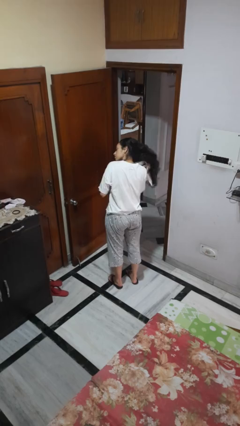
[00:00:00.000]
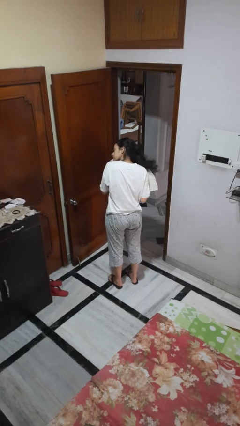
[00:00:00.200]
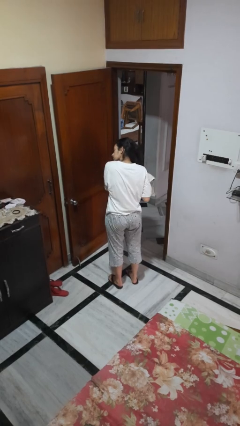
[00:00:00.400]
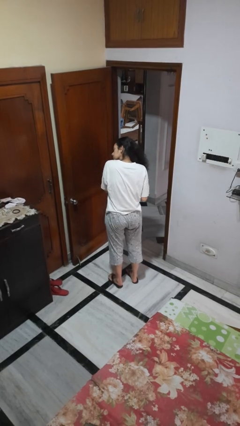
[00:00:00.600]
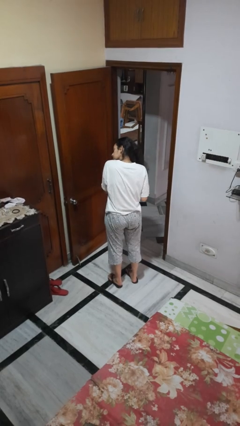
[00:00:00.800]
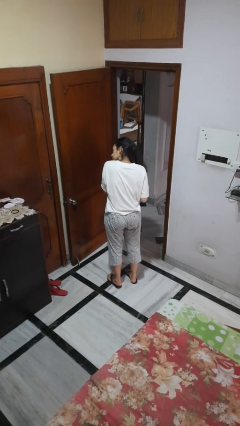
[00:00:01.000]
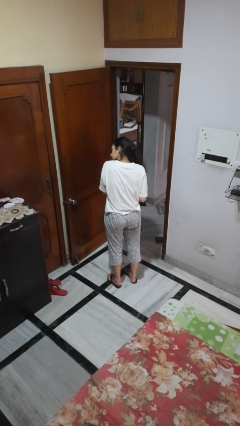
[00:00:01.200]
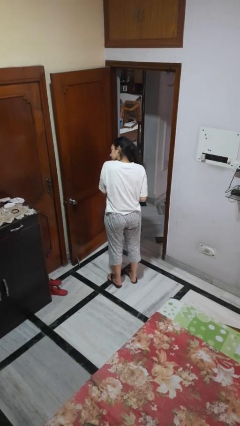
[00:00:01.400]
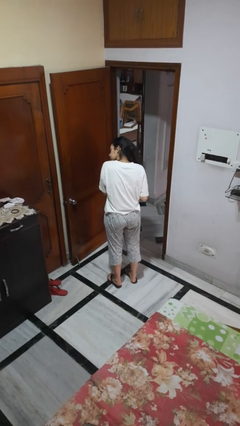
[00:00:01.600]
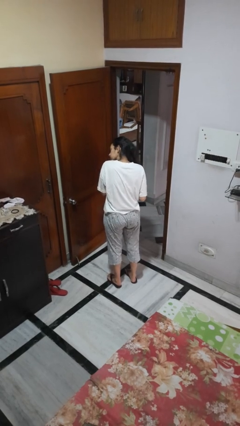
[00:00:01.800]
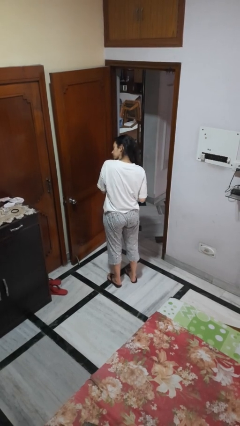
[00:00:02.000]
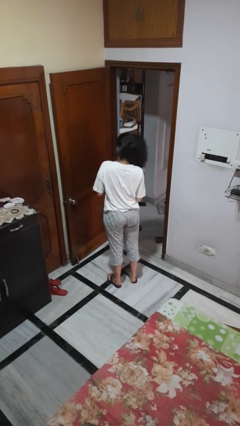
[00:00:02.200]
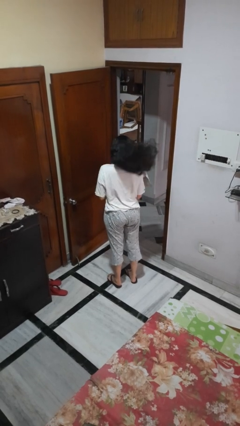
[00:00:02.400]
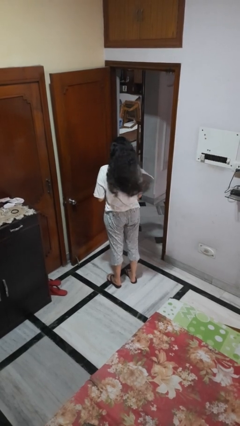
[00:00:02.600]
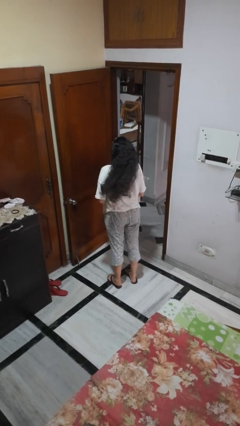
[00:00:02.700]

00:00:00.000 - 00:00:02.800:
person dries hair with towel

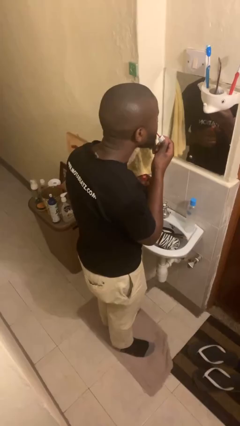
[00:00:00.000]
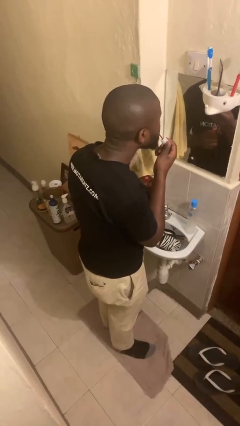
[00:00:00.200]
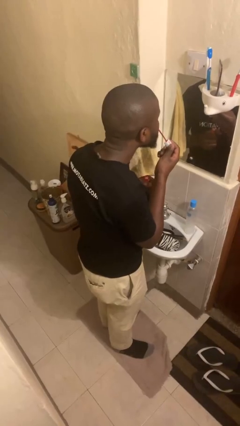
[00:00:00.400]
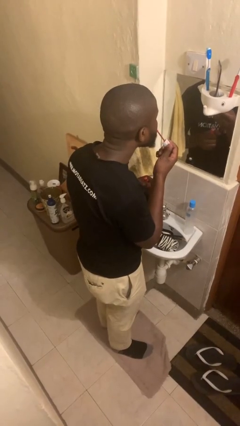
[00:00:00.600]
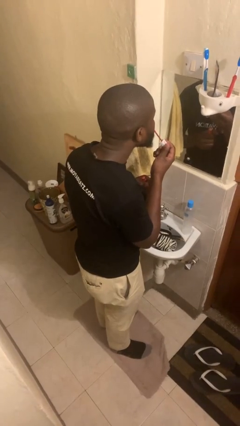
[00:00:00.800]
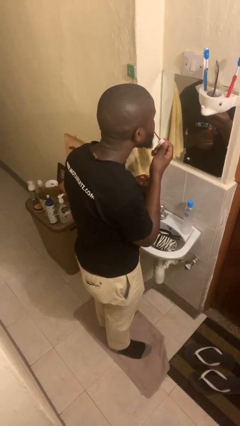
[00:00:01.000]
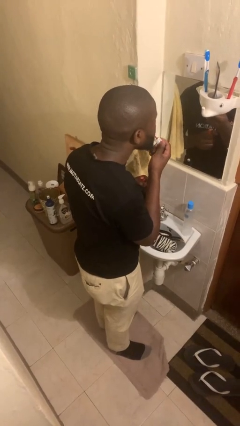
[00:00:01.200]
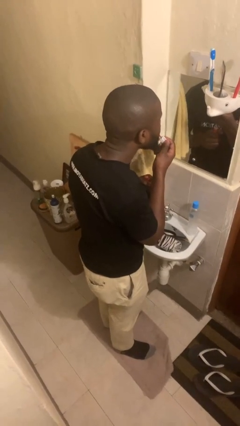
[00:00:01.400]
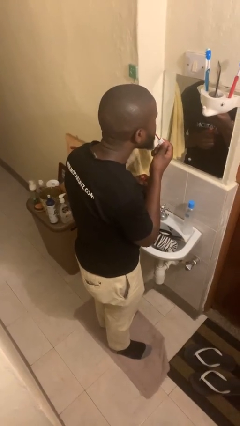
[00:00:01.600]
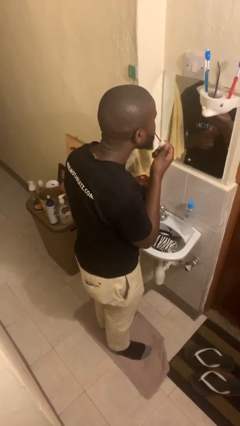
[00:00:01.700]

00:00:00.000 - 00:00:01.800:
person applies lip makeup

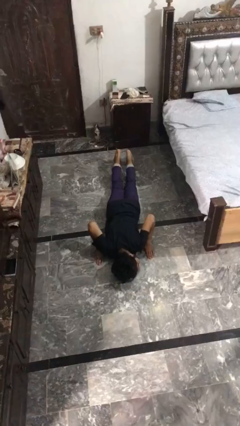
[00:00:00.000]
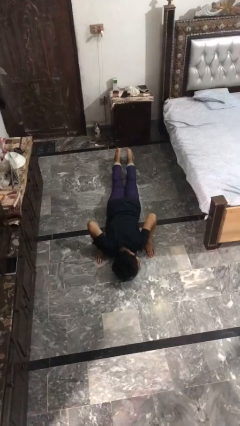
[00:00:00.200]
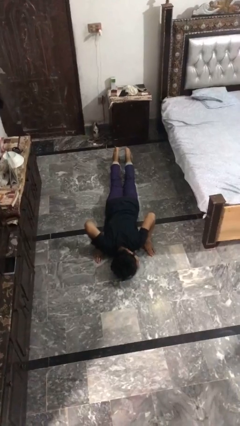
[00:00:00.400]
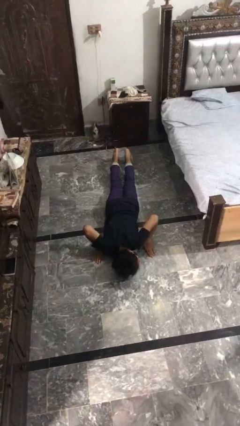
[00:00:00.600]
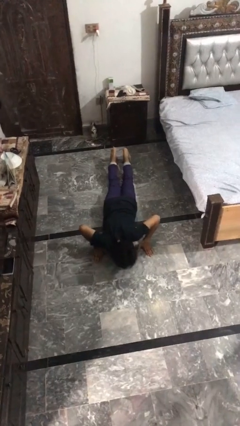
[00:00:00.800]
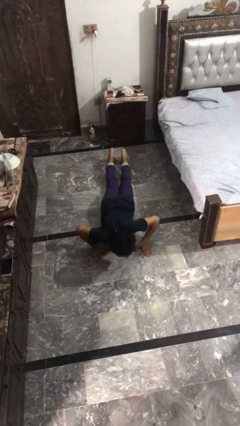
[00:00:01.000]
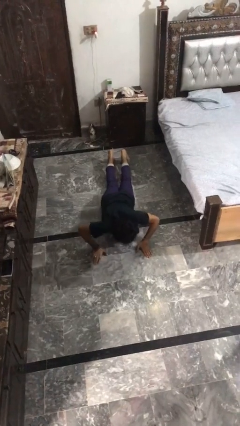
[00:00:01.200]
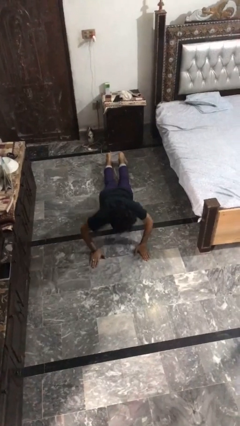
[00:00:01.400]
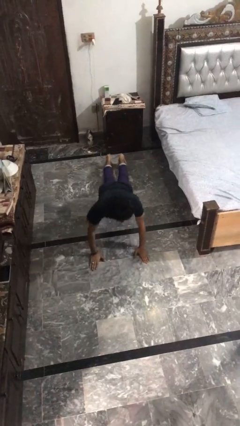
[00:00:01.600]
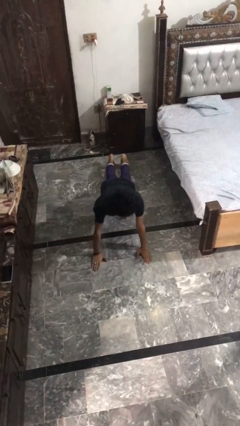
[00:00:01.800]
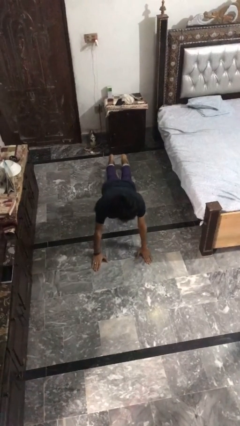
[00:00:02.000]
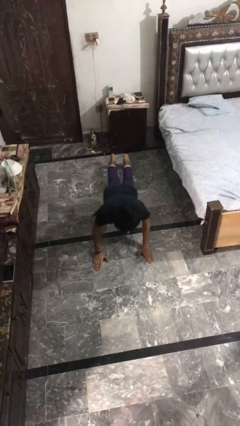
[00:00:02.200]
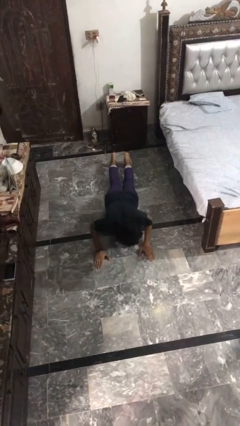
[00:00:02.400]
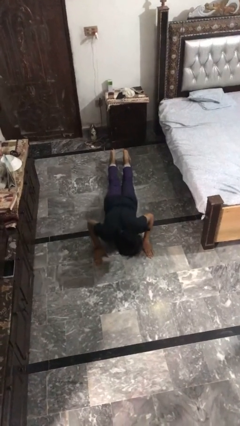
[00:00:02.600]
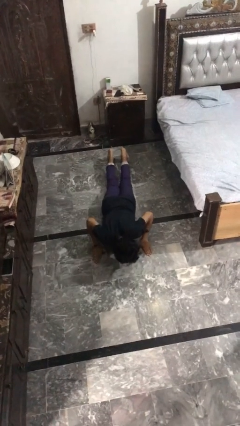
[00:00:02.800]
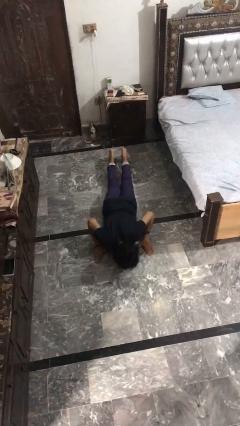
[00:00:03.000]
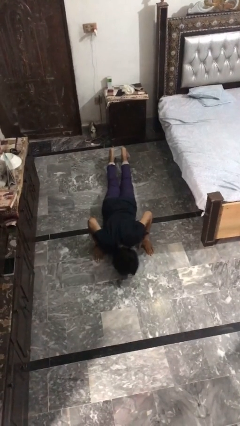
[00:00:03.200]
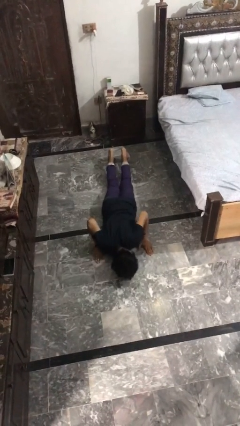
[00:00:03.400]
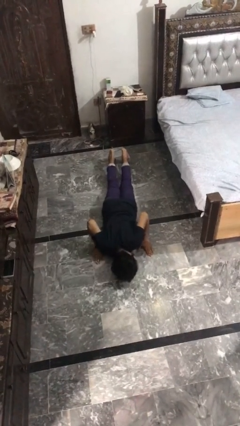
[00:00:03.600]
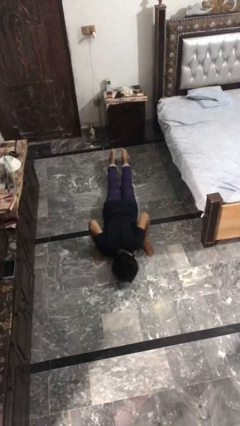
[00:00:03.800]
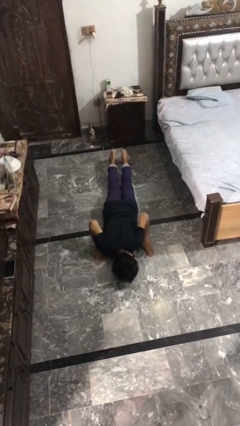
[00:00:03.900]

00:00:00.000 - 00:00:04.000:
person exercises with pushup

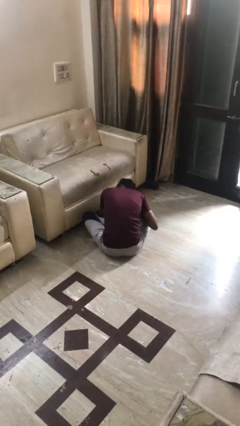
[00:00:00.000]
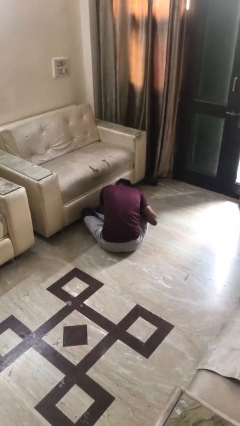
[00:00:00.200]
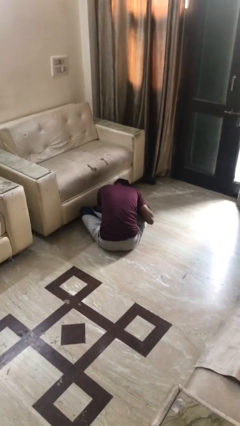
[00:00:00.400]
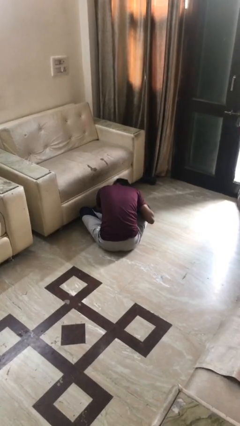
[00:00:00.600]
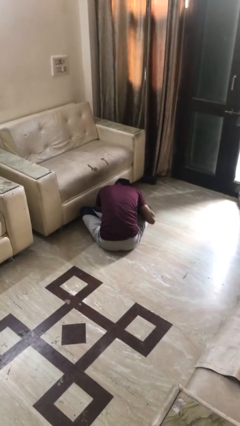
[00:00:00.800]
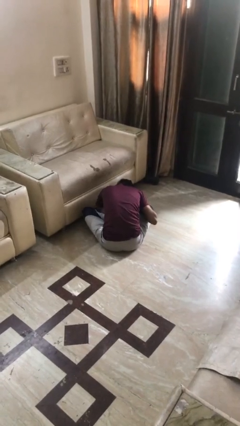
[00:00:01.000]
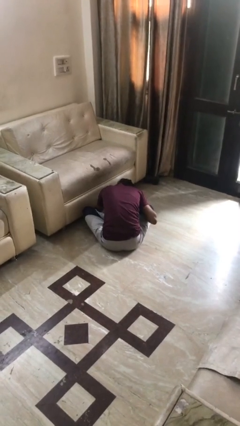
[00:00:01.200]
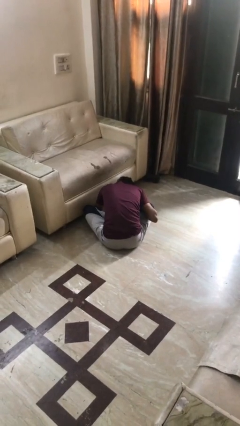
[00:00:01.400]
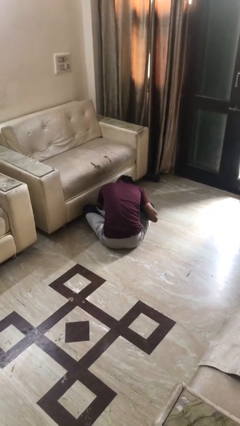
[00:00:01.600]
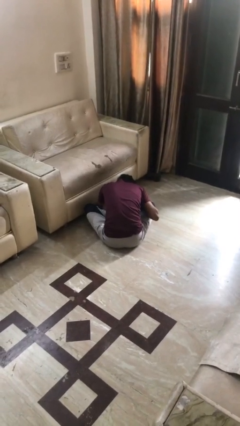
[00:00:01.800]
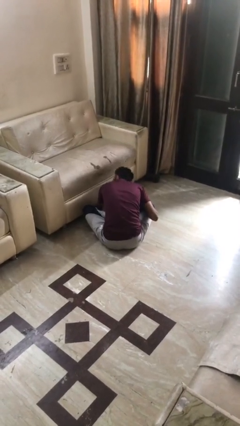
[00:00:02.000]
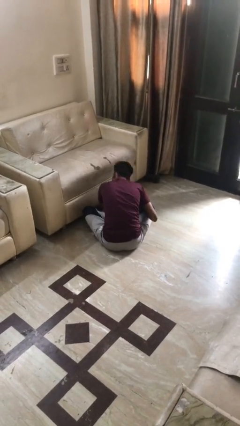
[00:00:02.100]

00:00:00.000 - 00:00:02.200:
person searches under couch

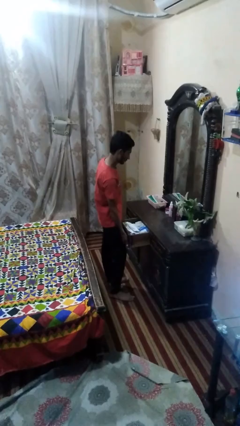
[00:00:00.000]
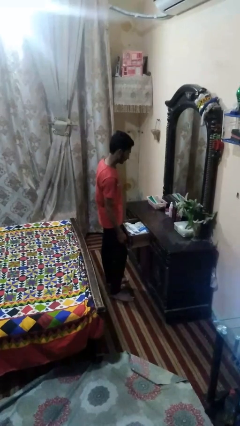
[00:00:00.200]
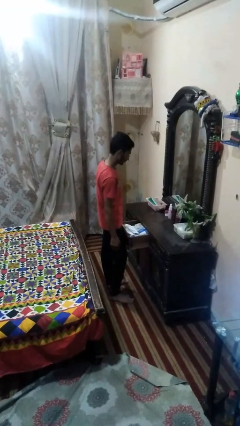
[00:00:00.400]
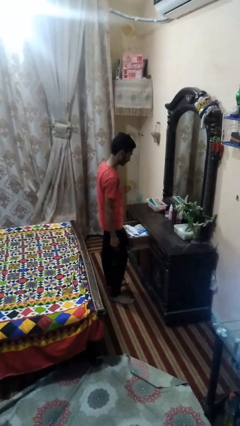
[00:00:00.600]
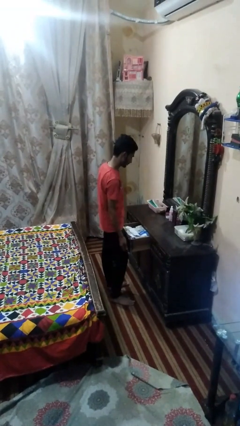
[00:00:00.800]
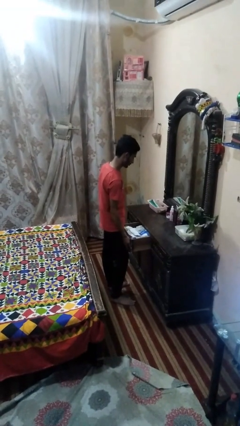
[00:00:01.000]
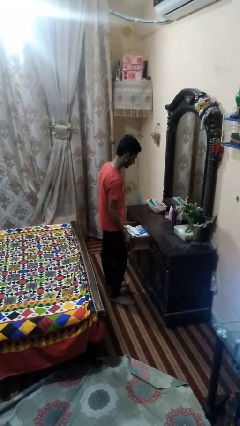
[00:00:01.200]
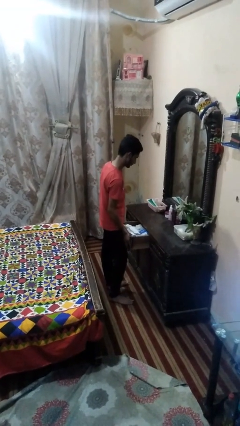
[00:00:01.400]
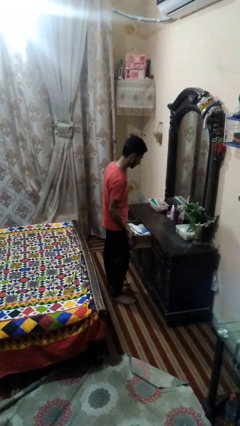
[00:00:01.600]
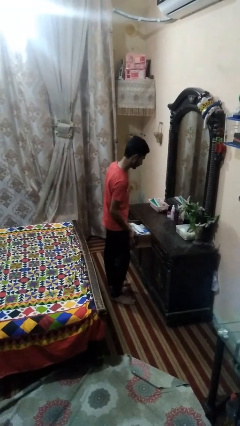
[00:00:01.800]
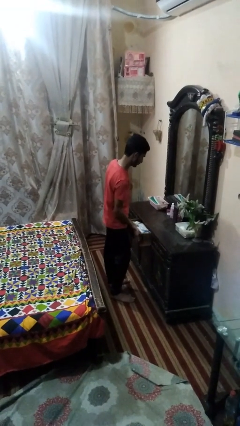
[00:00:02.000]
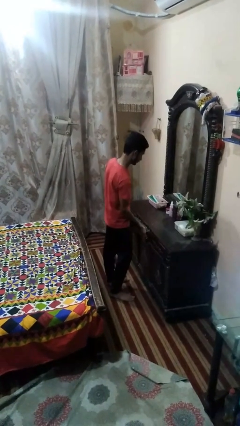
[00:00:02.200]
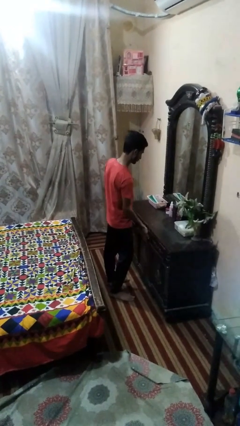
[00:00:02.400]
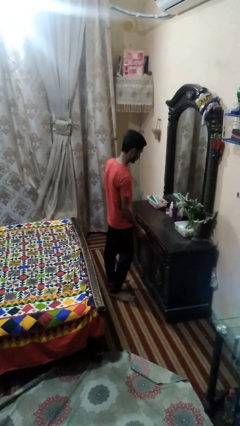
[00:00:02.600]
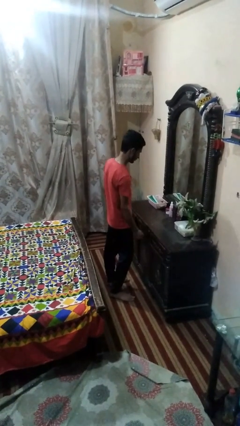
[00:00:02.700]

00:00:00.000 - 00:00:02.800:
person closes dresser drawer

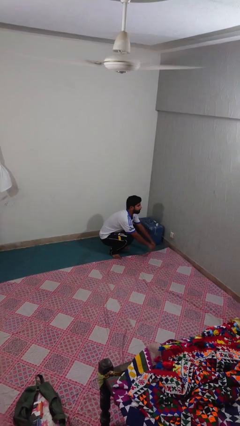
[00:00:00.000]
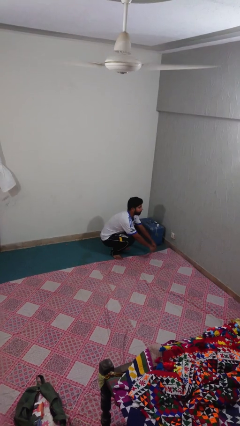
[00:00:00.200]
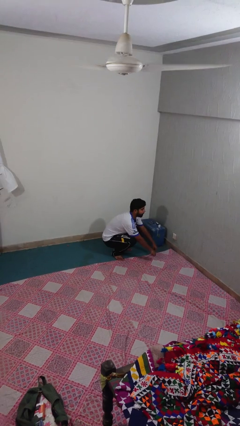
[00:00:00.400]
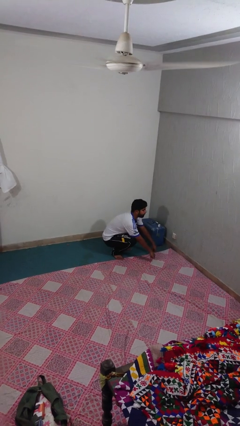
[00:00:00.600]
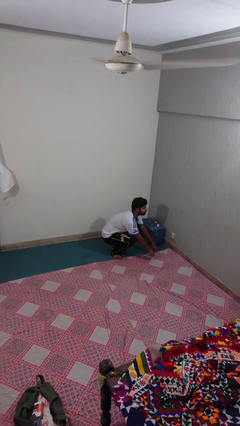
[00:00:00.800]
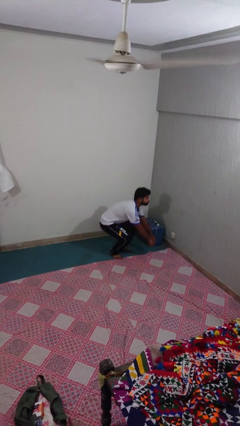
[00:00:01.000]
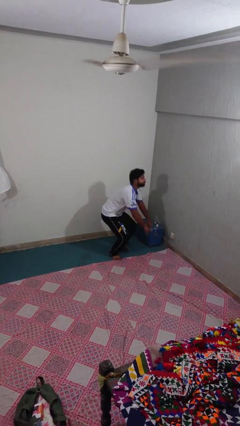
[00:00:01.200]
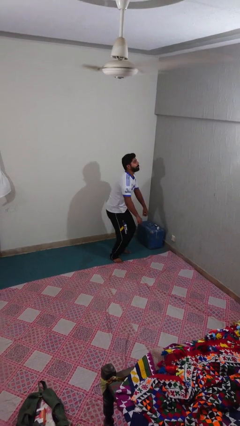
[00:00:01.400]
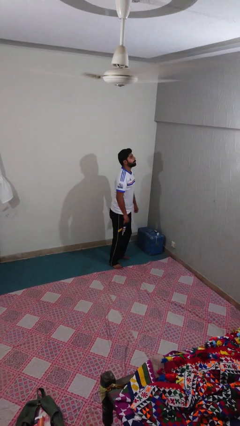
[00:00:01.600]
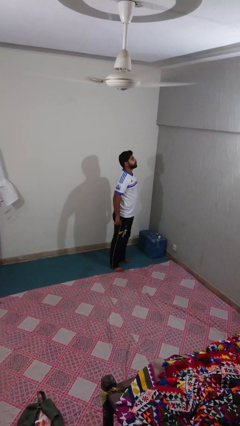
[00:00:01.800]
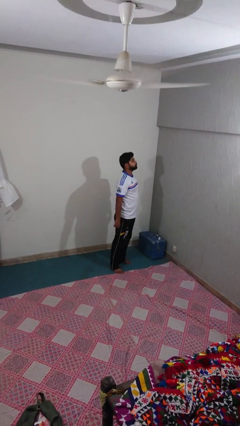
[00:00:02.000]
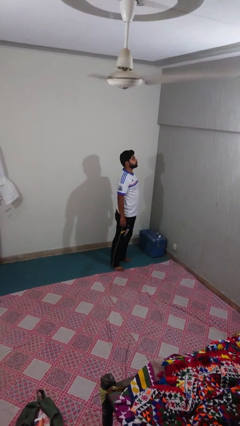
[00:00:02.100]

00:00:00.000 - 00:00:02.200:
person stands up

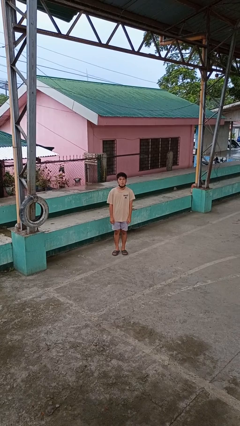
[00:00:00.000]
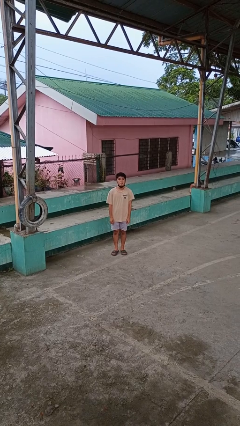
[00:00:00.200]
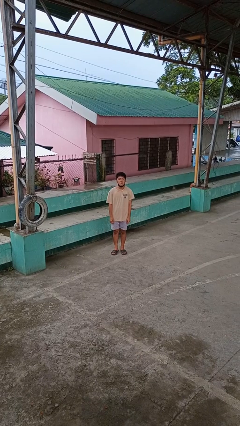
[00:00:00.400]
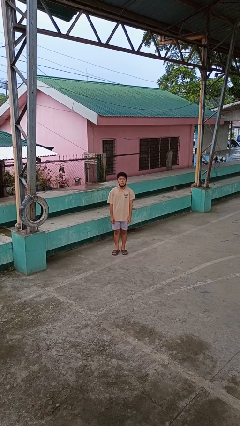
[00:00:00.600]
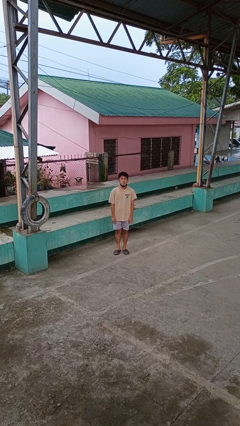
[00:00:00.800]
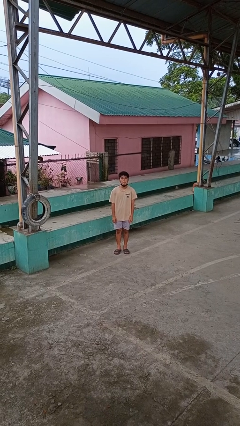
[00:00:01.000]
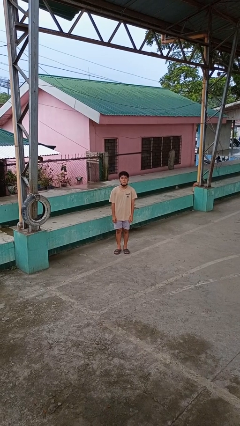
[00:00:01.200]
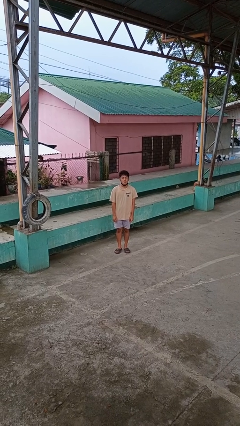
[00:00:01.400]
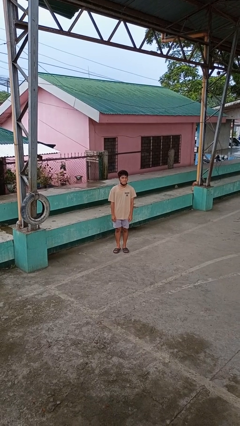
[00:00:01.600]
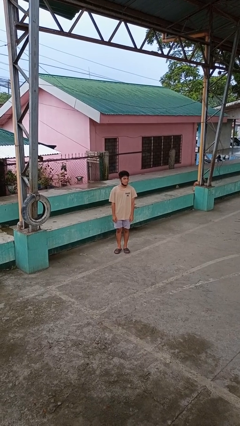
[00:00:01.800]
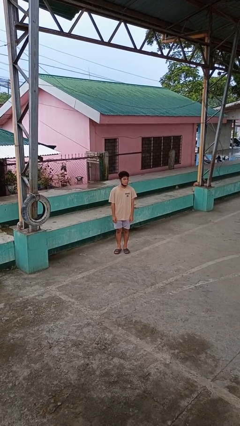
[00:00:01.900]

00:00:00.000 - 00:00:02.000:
person sticks out tongue
